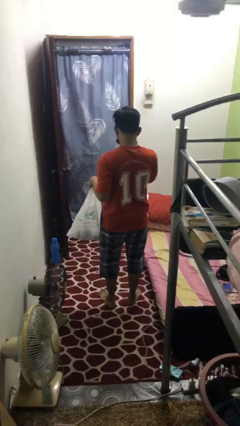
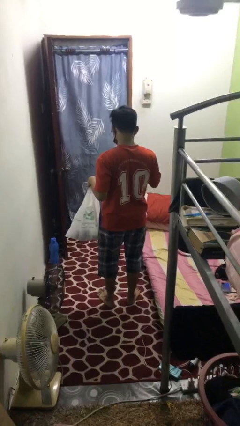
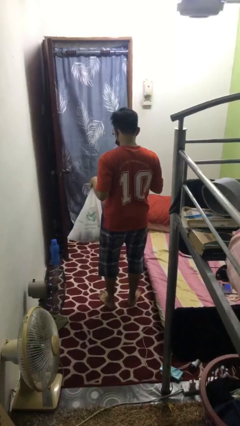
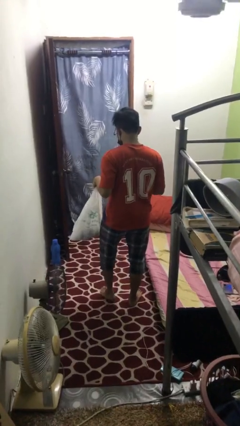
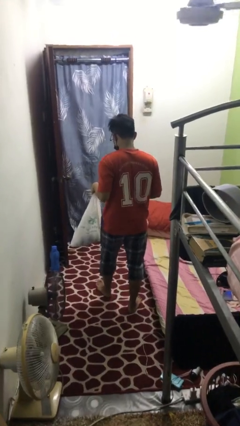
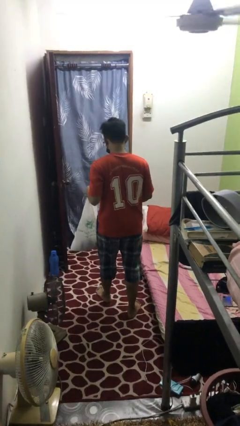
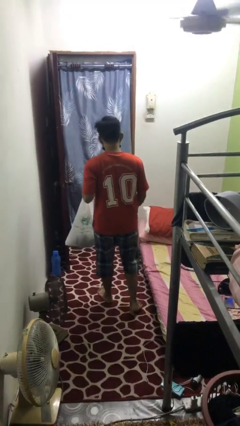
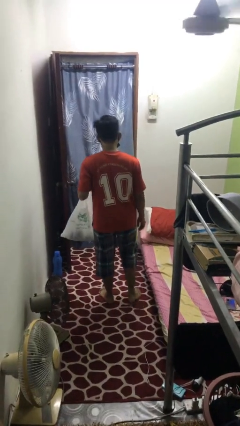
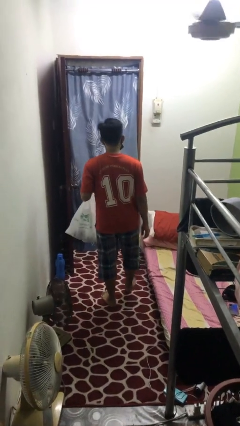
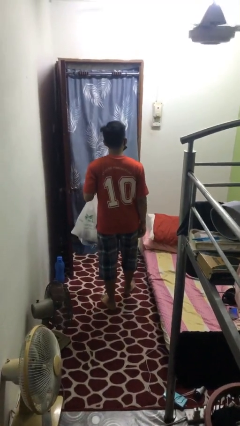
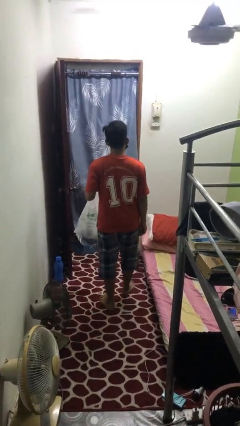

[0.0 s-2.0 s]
person carries groceries

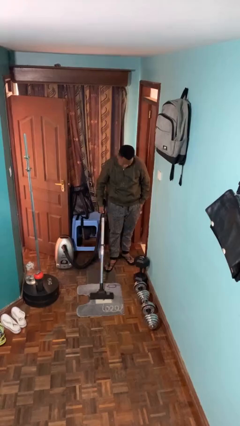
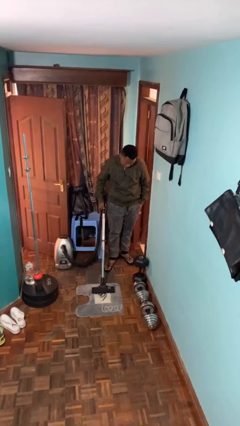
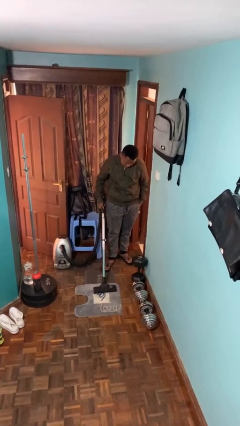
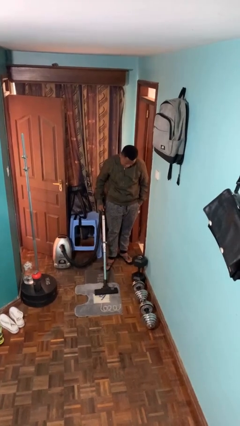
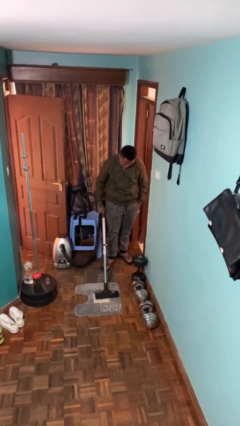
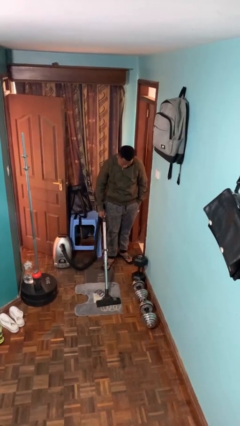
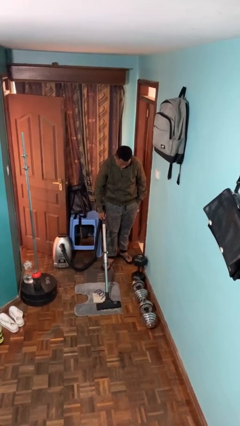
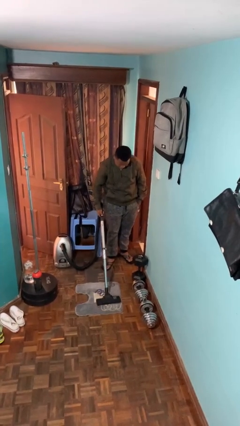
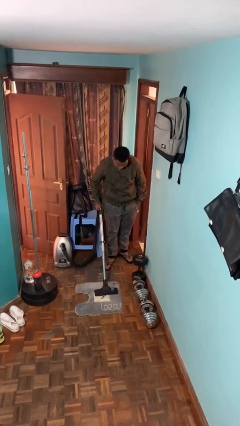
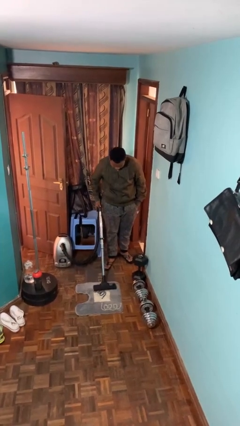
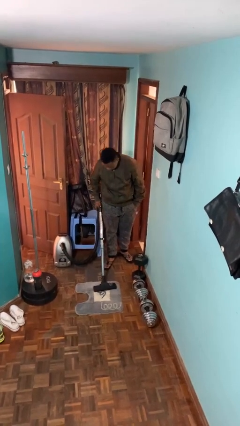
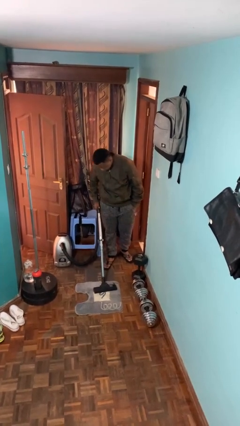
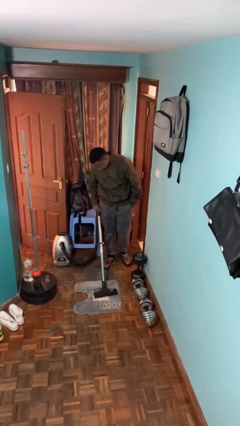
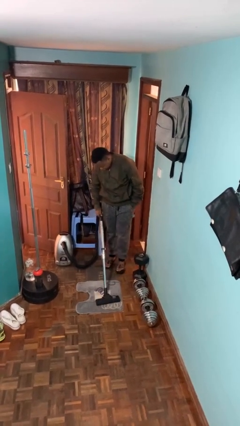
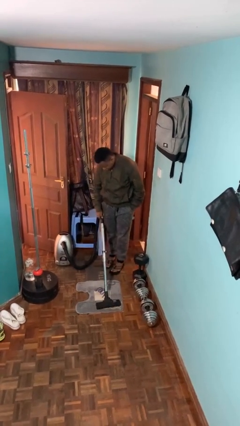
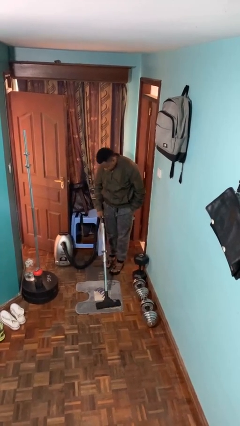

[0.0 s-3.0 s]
person vacuums carpet

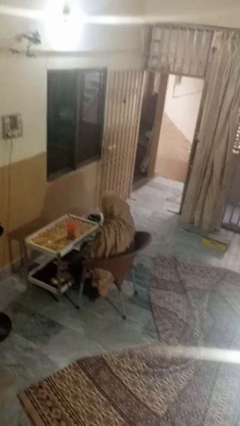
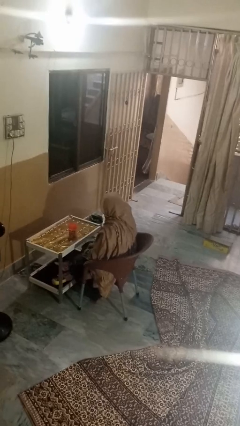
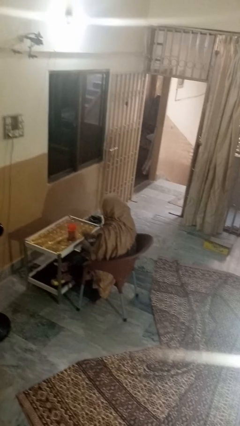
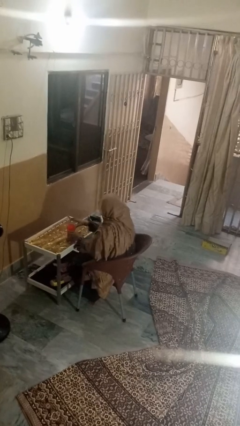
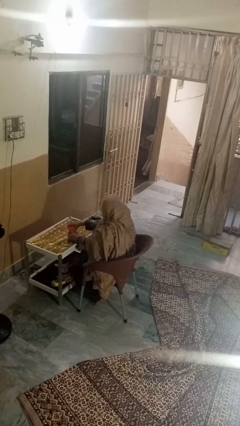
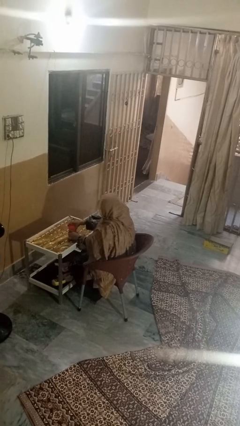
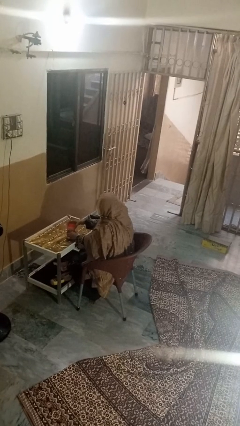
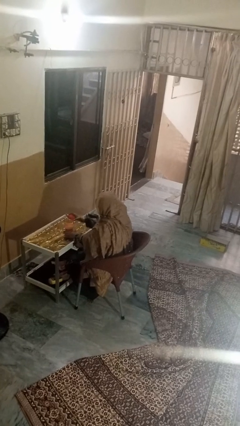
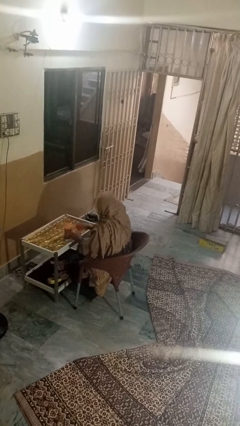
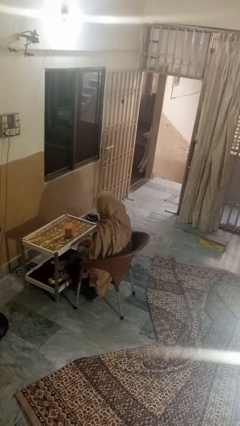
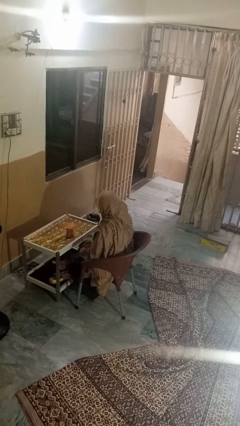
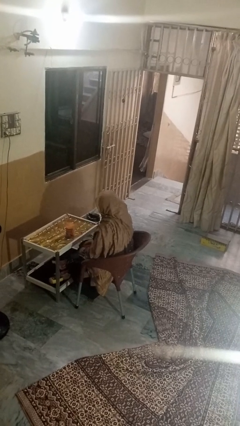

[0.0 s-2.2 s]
person opens jar

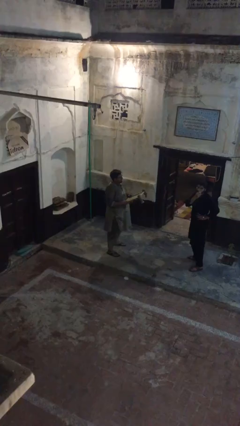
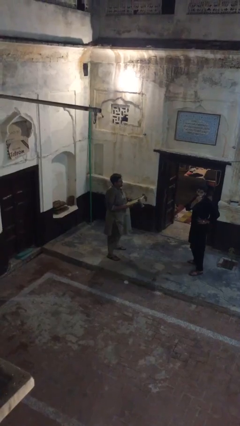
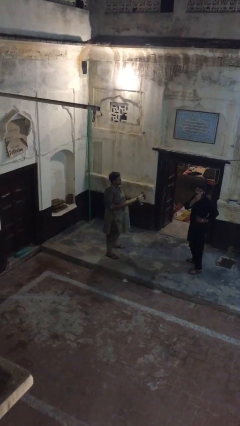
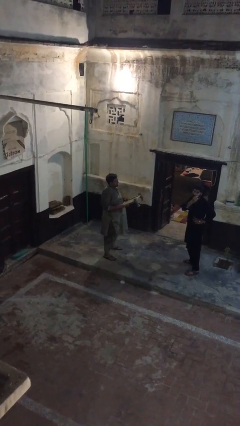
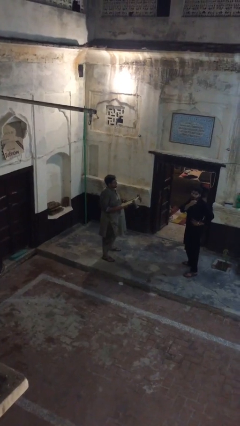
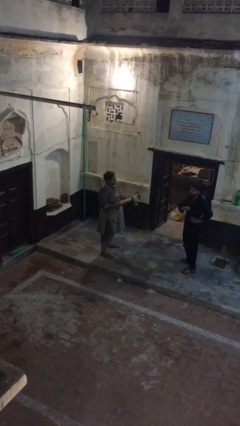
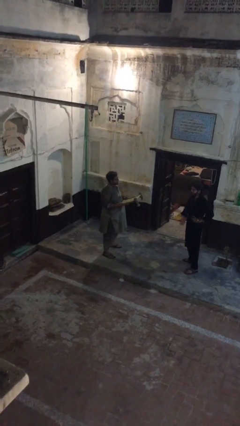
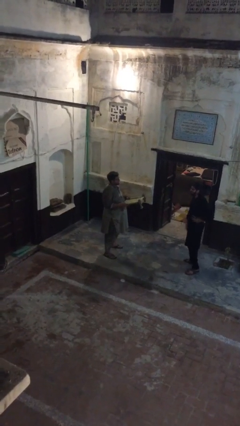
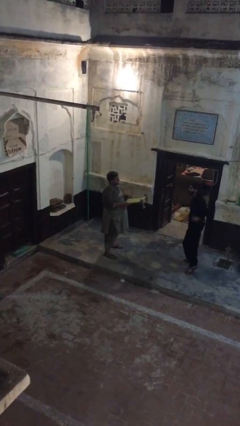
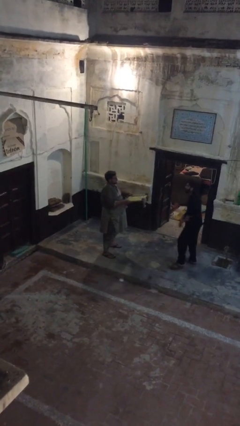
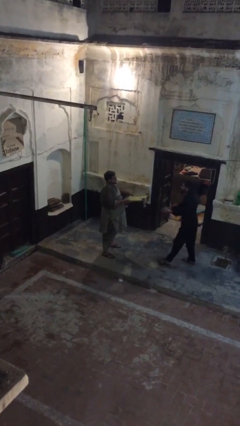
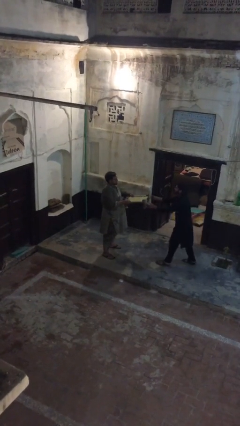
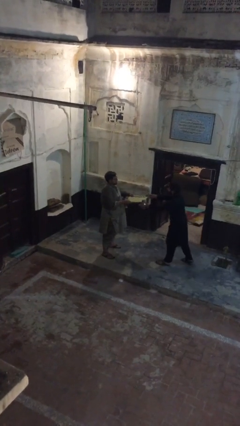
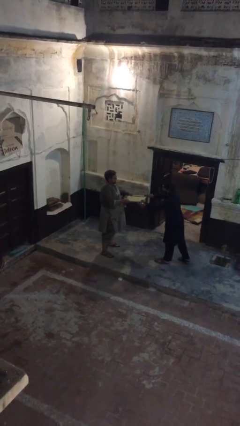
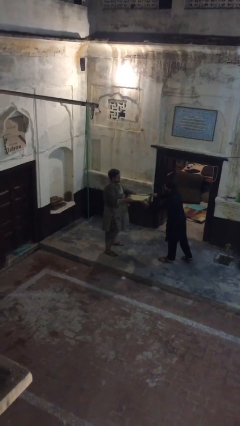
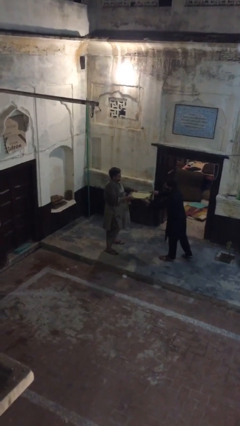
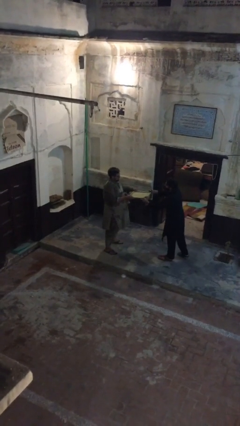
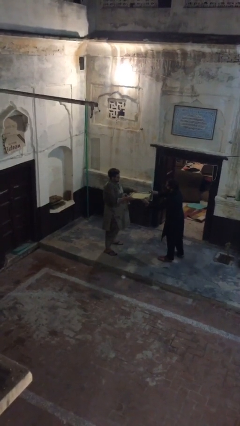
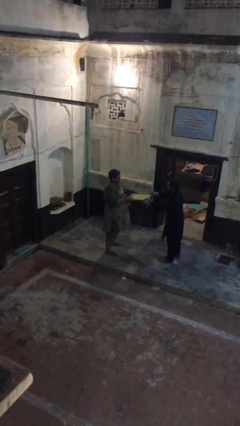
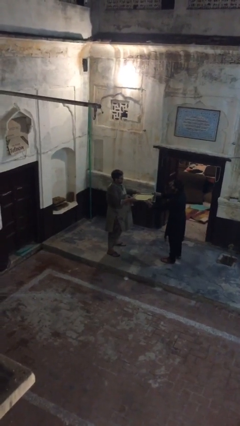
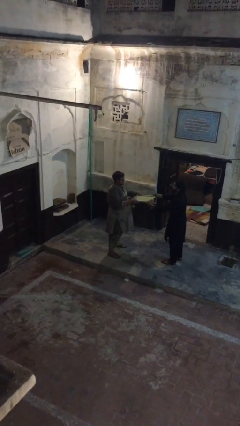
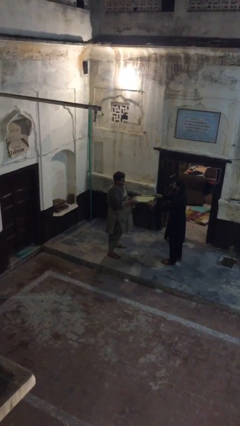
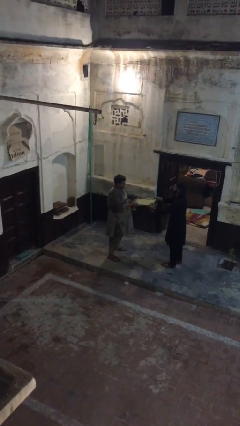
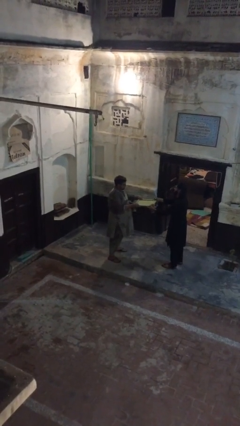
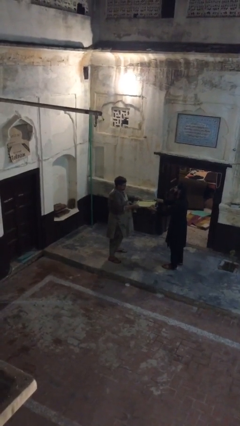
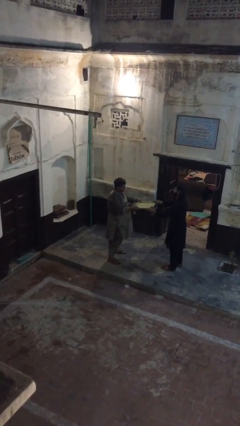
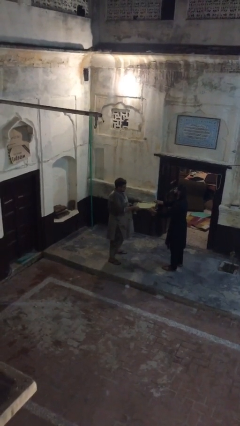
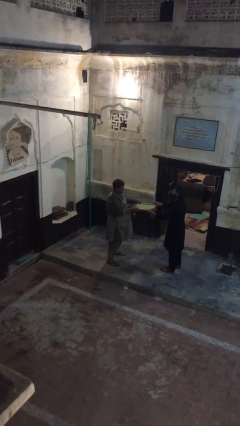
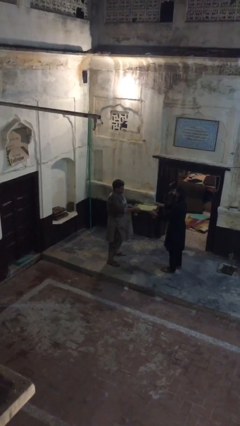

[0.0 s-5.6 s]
person transfers object to person

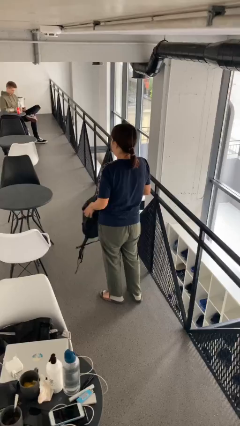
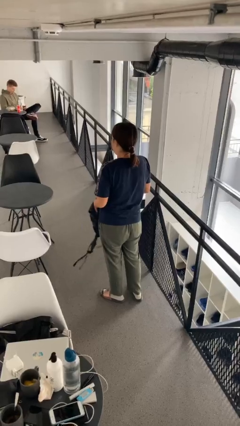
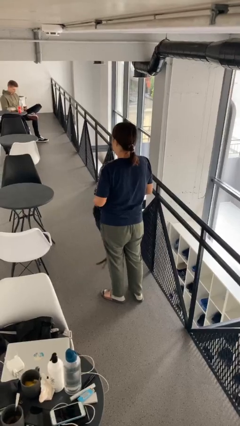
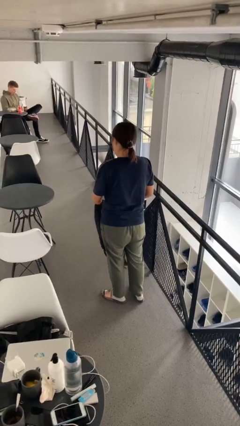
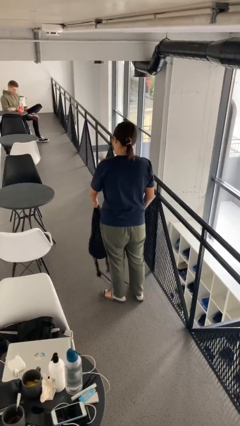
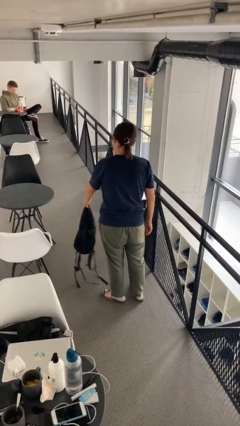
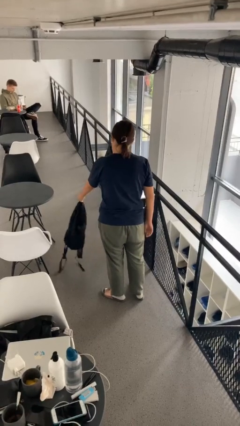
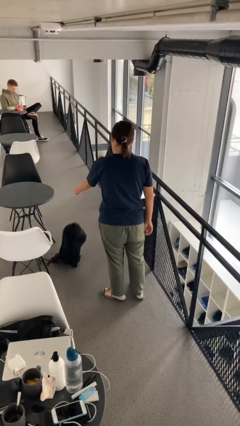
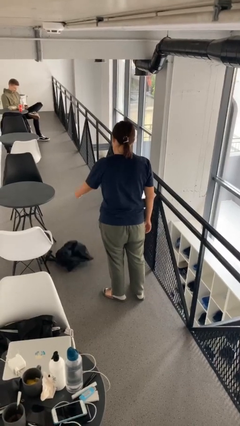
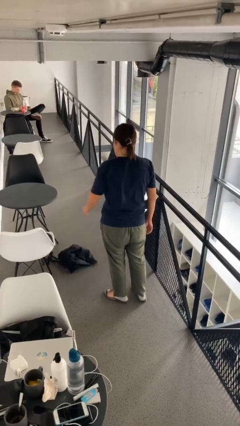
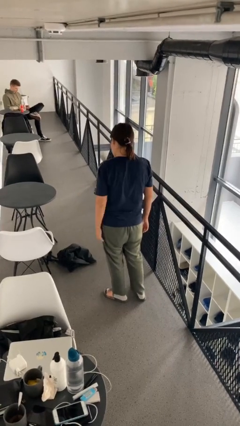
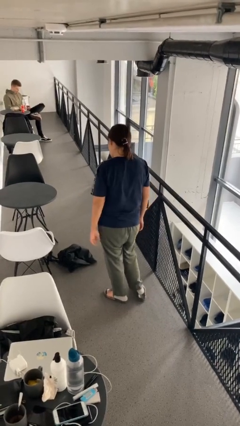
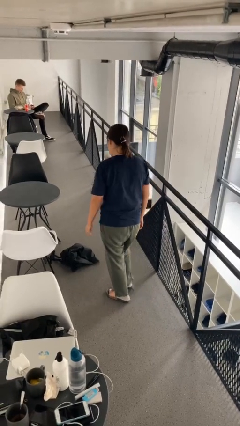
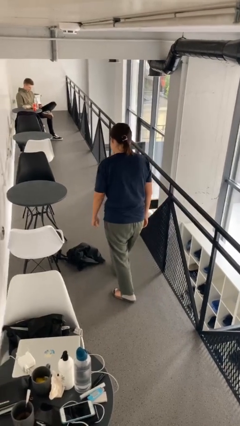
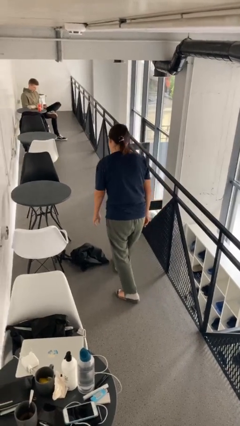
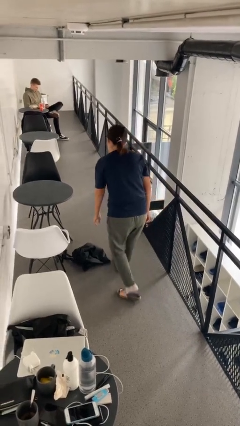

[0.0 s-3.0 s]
person throws object to ground

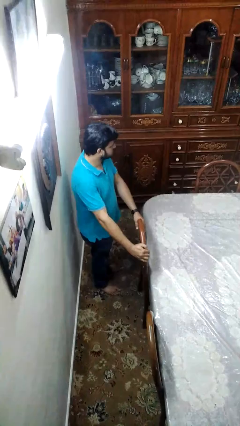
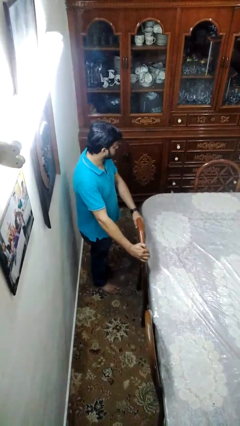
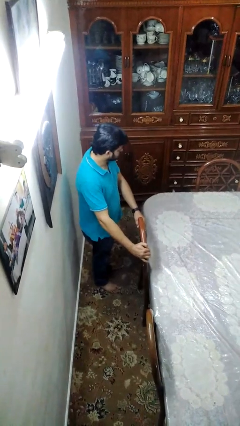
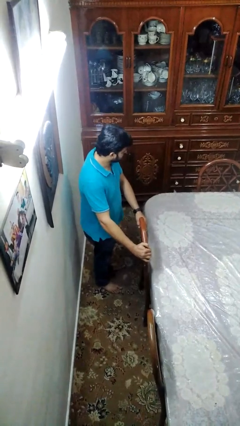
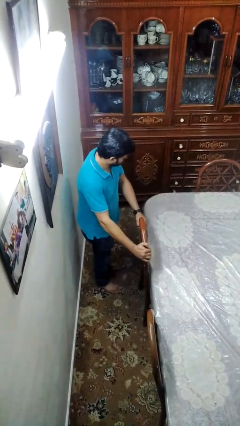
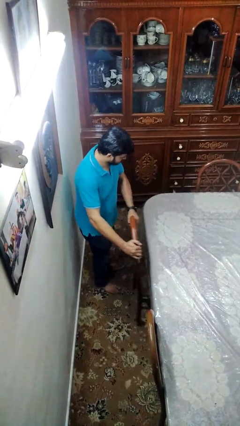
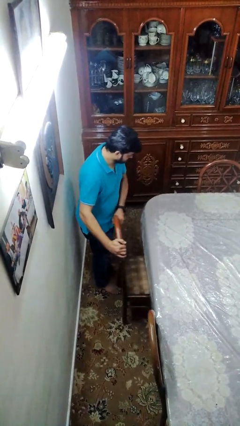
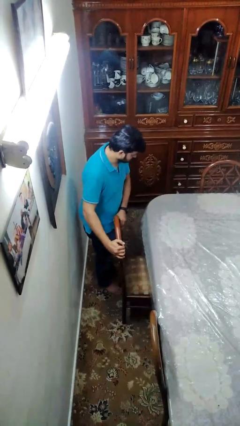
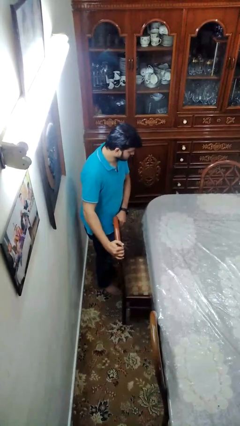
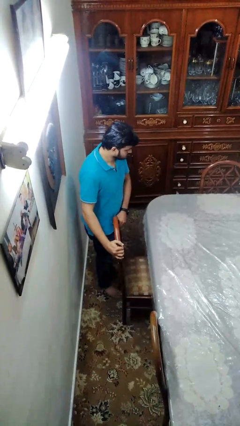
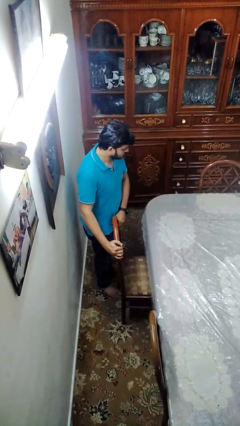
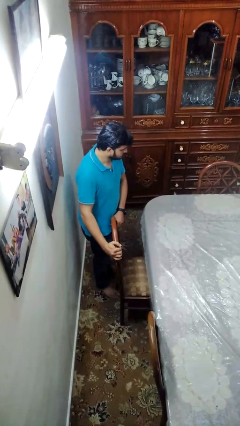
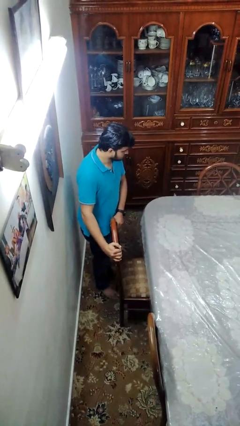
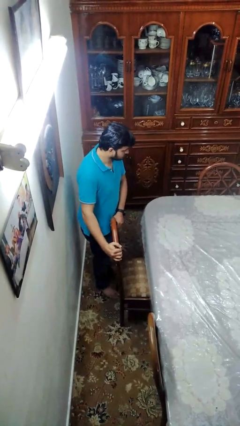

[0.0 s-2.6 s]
person pulls out chair
